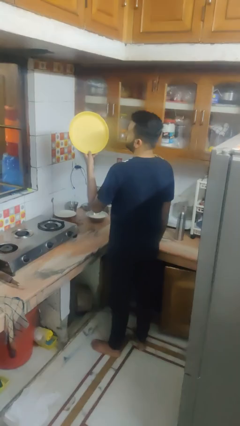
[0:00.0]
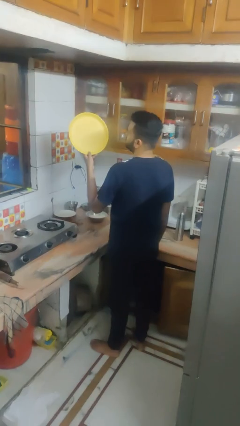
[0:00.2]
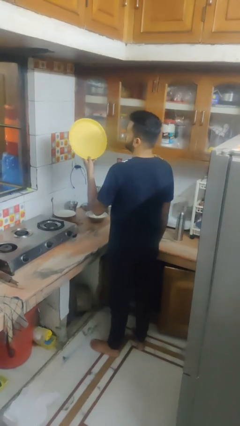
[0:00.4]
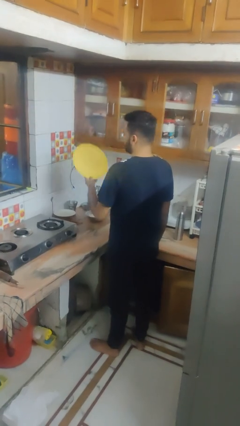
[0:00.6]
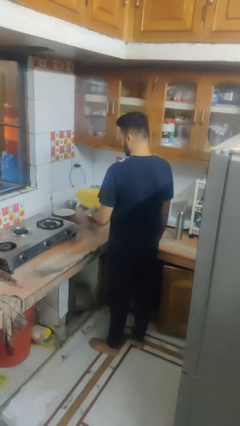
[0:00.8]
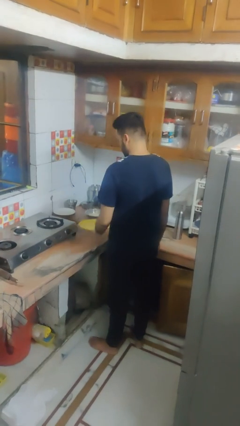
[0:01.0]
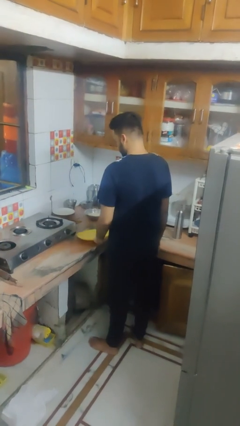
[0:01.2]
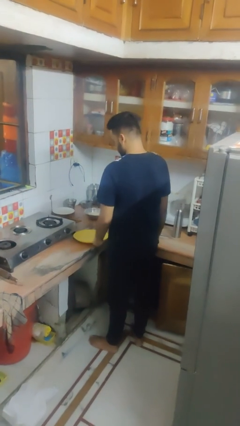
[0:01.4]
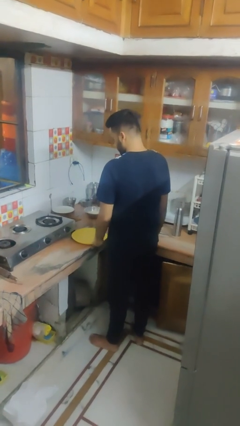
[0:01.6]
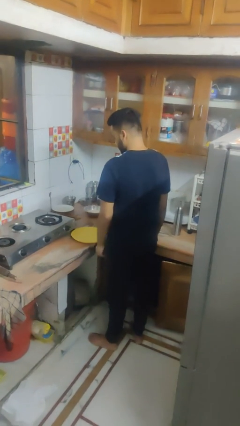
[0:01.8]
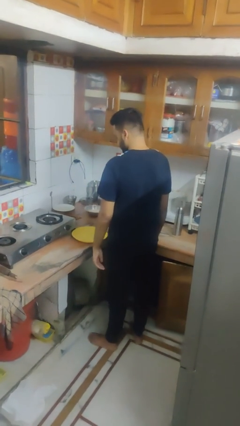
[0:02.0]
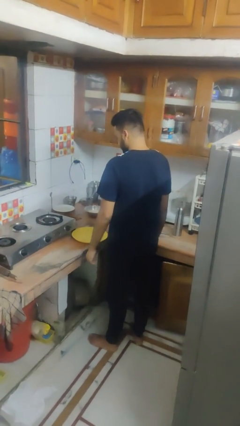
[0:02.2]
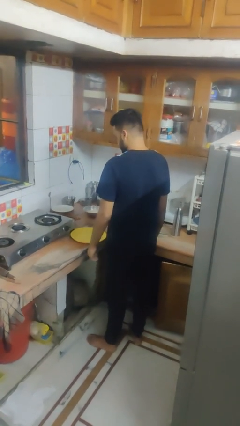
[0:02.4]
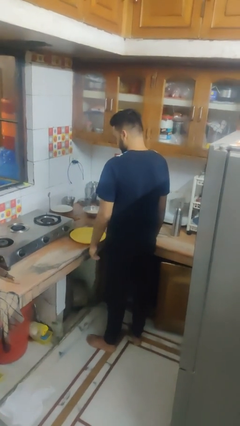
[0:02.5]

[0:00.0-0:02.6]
person puts down object on countertop

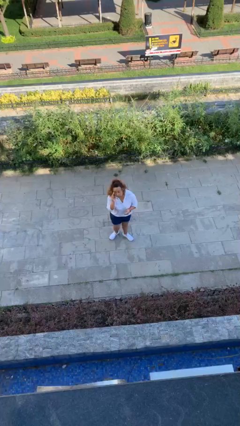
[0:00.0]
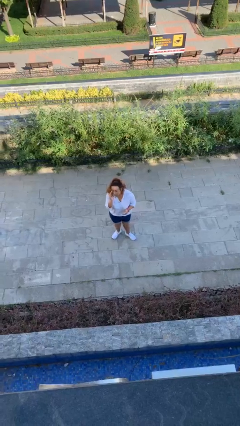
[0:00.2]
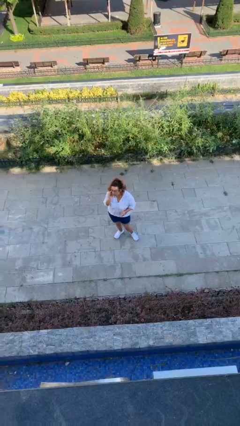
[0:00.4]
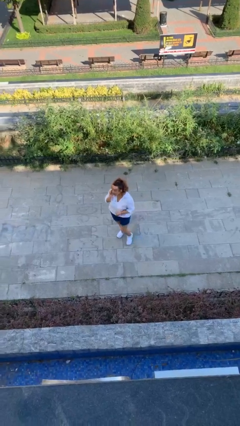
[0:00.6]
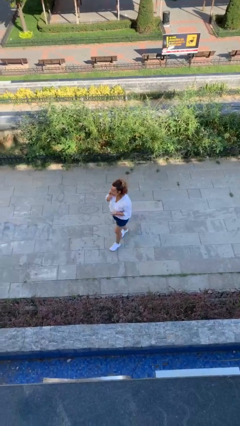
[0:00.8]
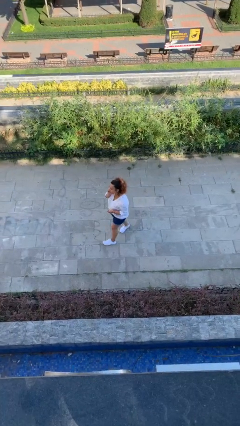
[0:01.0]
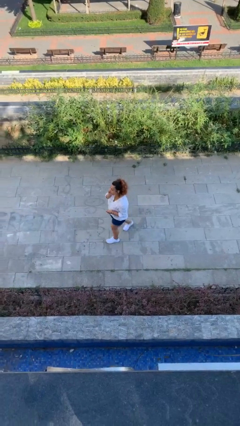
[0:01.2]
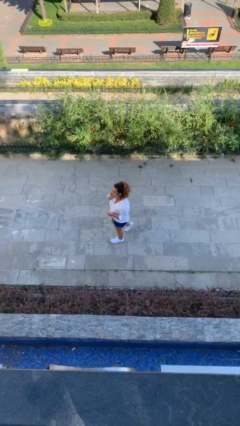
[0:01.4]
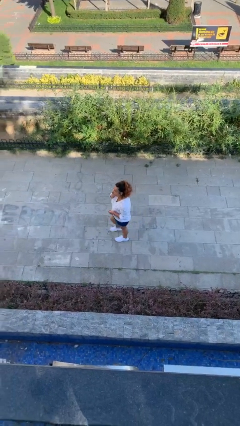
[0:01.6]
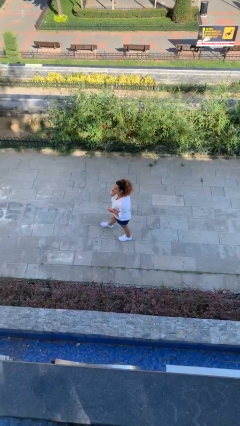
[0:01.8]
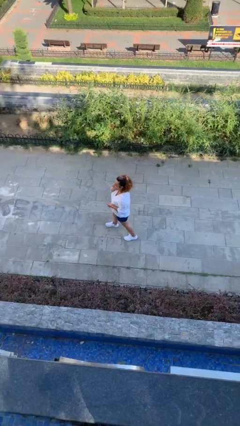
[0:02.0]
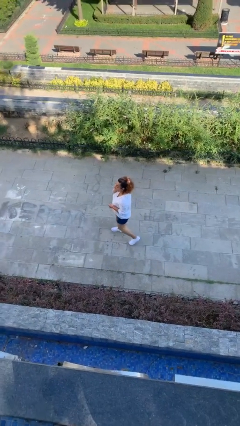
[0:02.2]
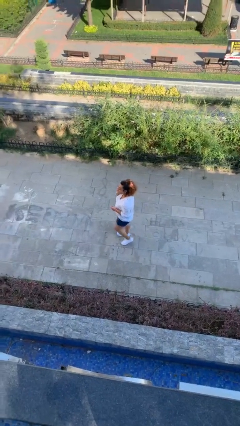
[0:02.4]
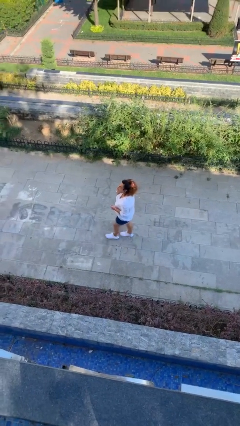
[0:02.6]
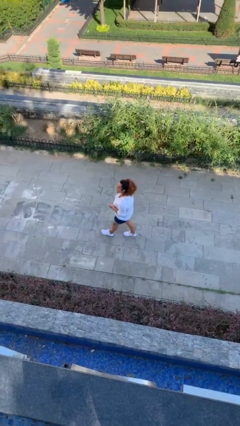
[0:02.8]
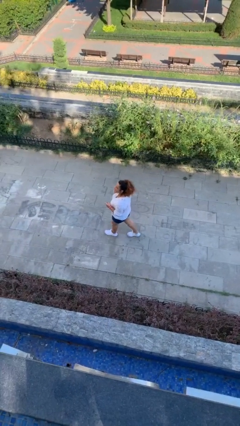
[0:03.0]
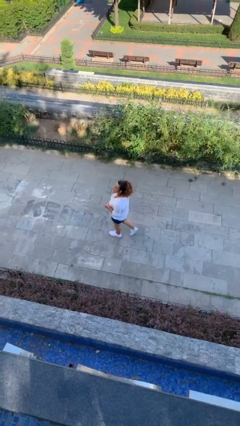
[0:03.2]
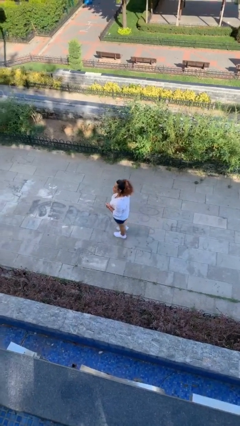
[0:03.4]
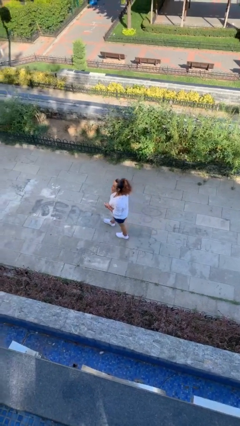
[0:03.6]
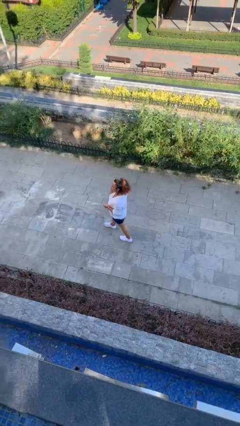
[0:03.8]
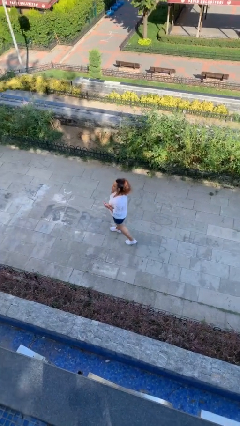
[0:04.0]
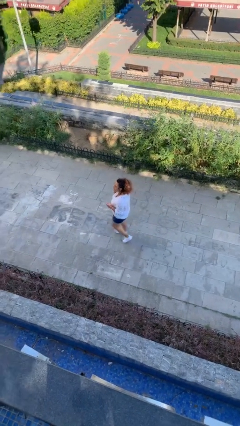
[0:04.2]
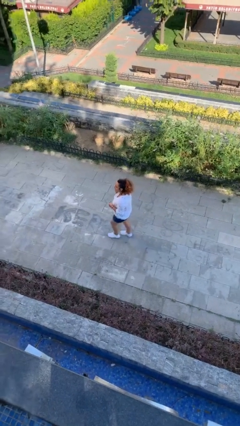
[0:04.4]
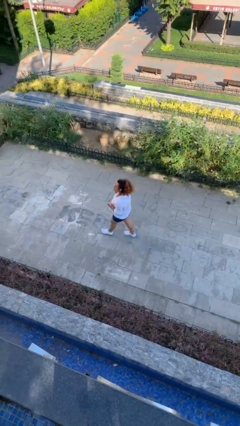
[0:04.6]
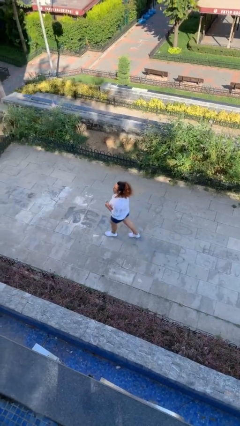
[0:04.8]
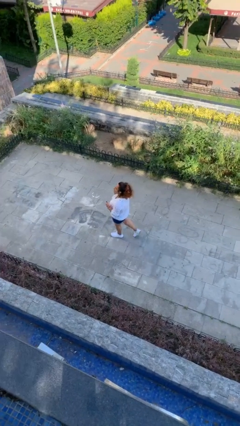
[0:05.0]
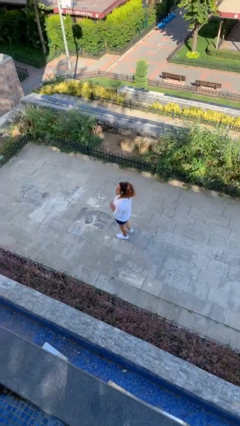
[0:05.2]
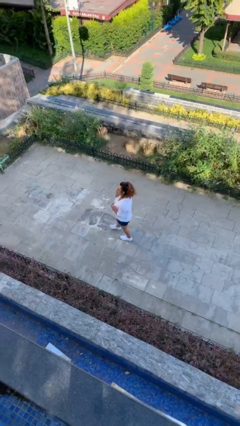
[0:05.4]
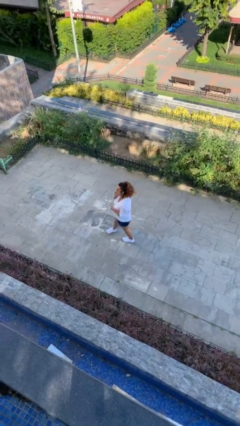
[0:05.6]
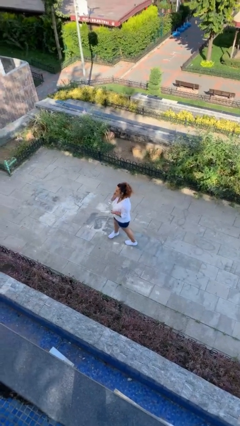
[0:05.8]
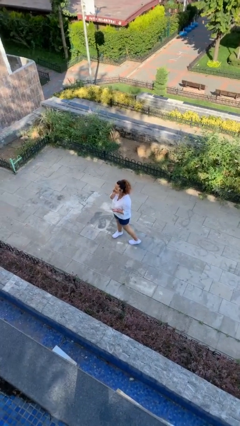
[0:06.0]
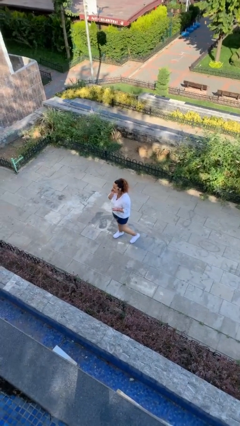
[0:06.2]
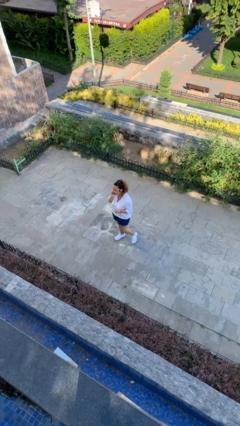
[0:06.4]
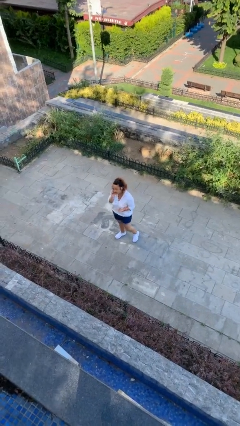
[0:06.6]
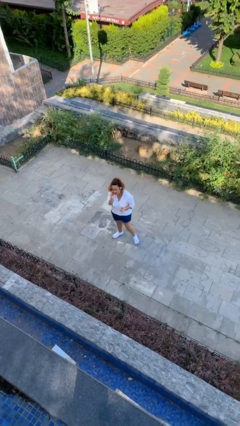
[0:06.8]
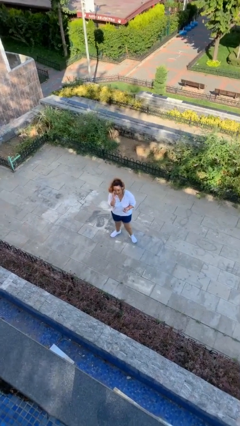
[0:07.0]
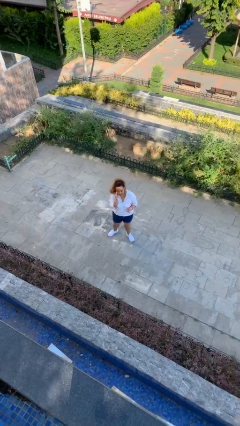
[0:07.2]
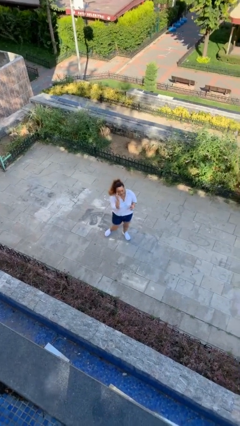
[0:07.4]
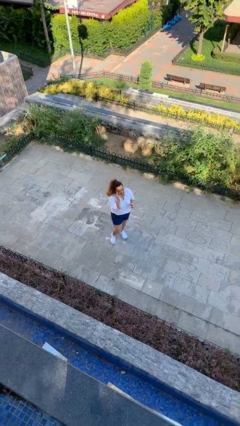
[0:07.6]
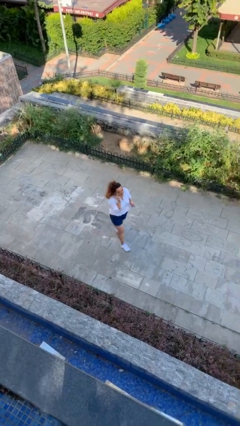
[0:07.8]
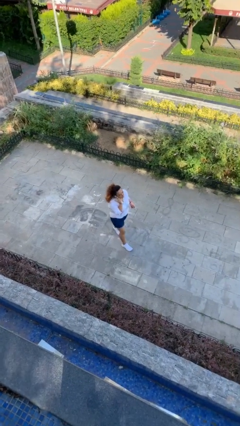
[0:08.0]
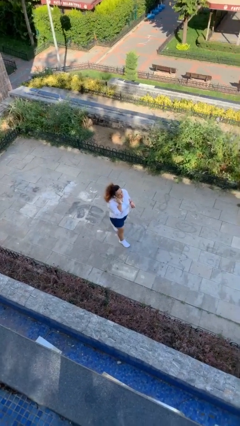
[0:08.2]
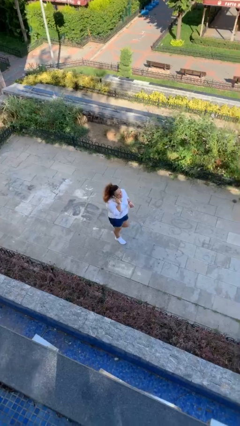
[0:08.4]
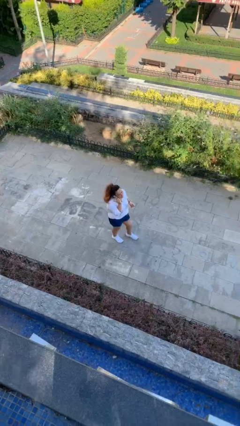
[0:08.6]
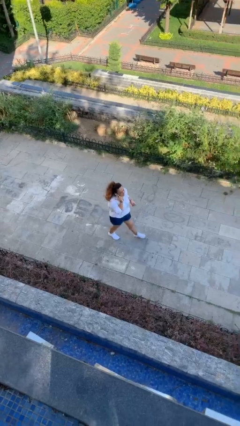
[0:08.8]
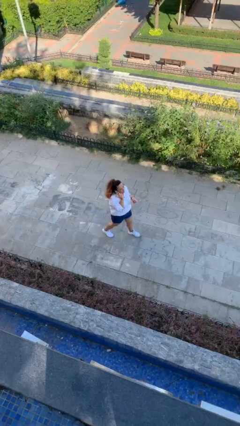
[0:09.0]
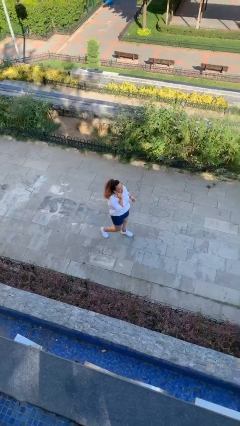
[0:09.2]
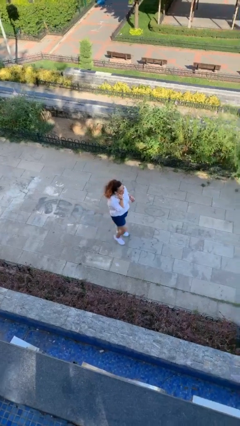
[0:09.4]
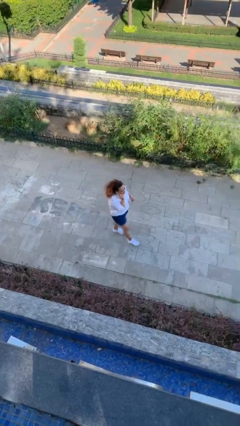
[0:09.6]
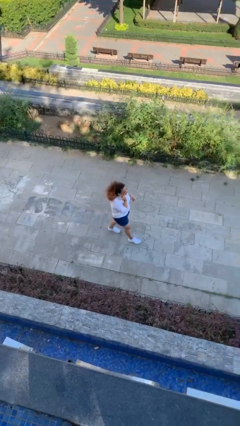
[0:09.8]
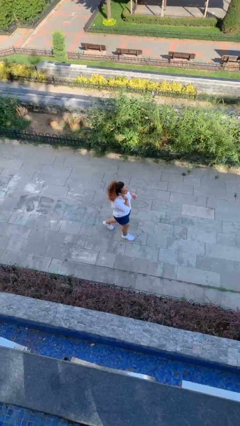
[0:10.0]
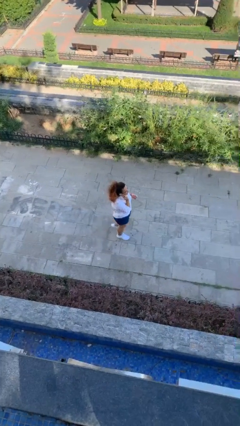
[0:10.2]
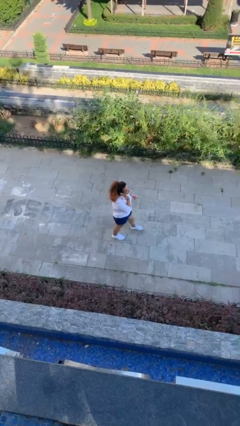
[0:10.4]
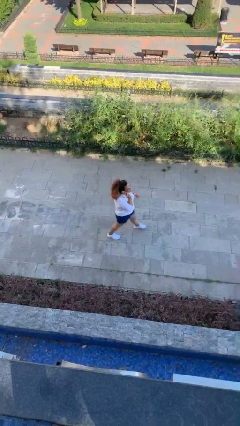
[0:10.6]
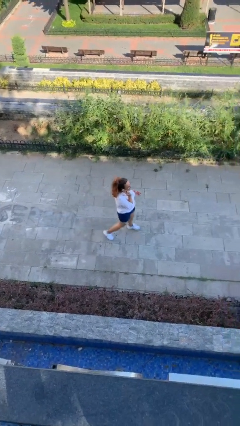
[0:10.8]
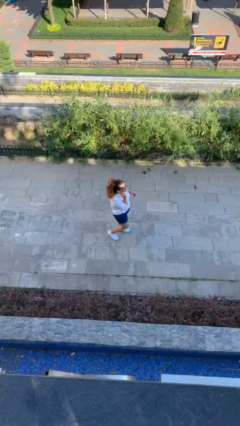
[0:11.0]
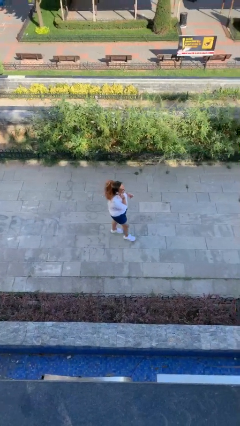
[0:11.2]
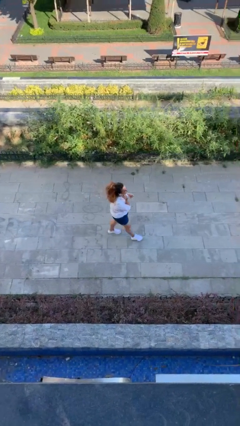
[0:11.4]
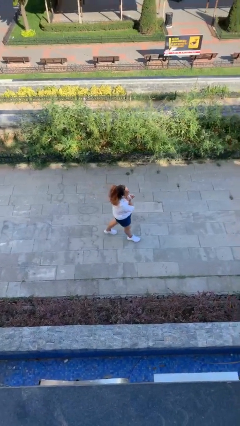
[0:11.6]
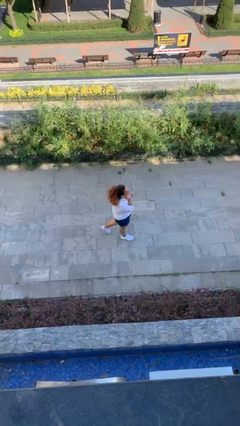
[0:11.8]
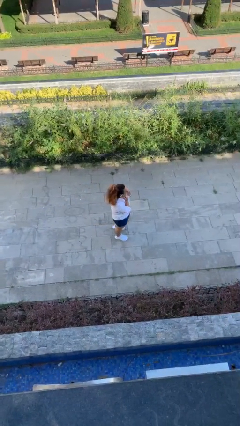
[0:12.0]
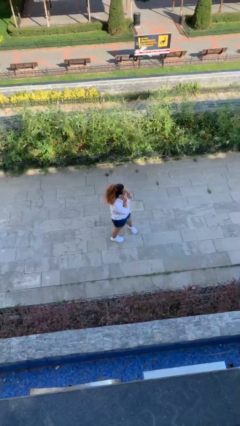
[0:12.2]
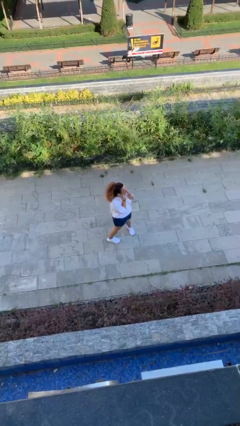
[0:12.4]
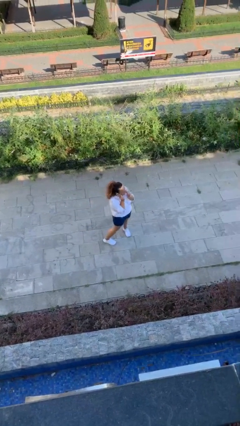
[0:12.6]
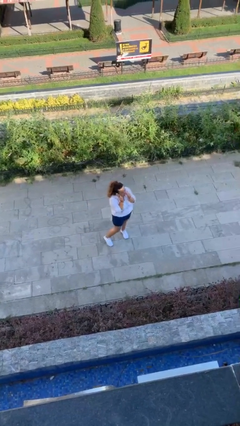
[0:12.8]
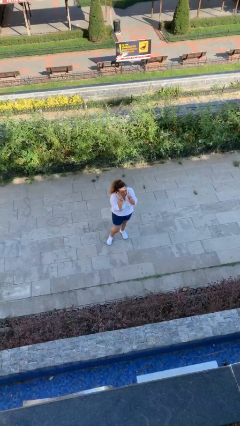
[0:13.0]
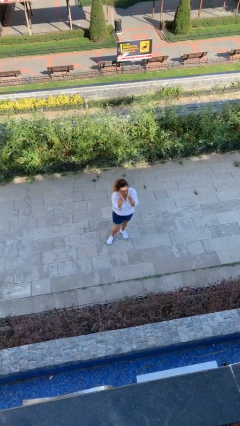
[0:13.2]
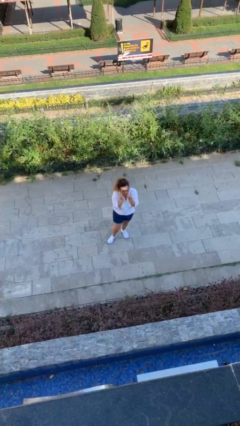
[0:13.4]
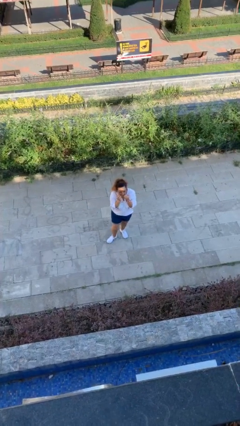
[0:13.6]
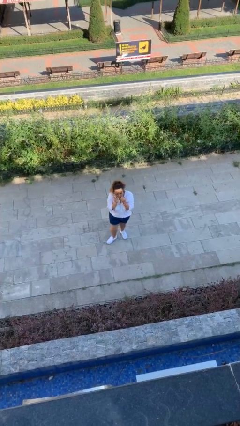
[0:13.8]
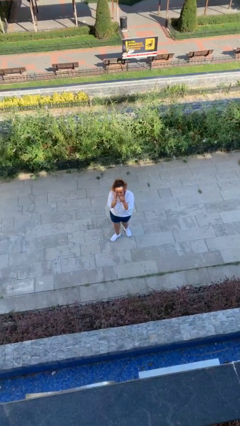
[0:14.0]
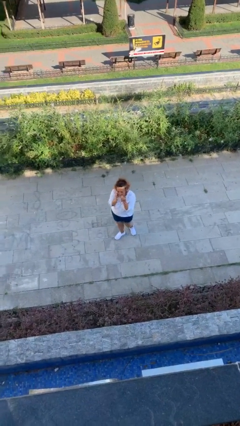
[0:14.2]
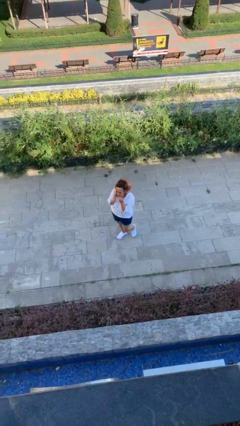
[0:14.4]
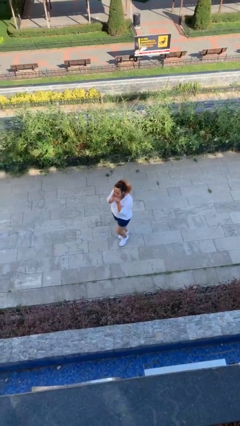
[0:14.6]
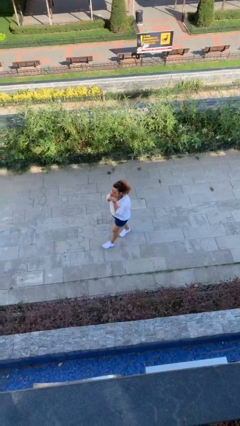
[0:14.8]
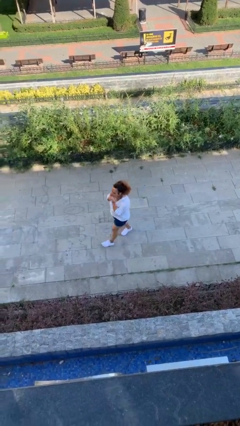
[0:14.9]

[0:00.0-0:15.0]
person talks on phone
